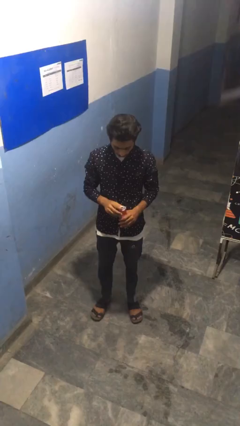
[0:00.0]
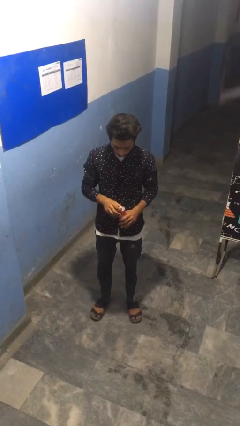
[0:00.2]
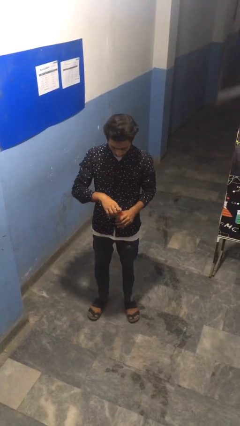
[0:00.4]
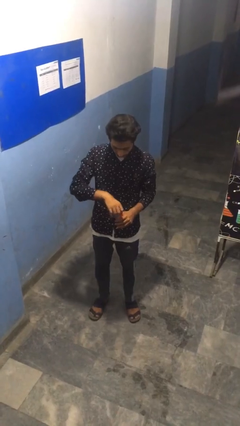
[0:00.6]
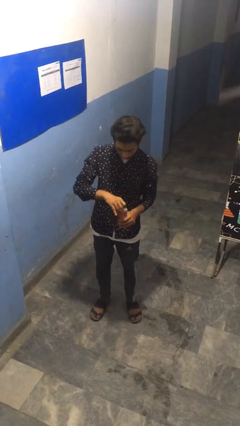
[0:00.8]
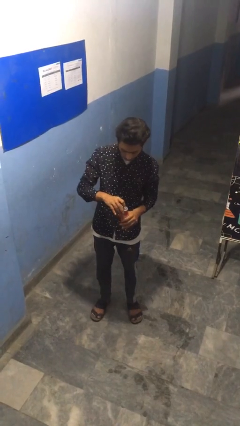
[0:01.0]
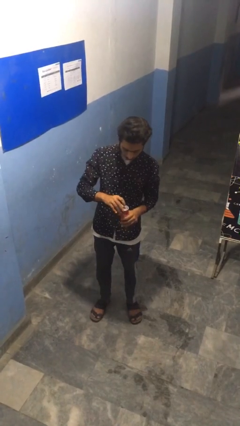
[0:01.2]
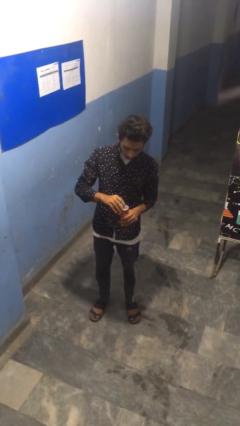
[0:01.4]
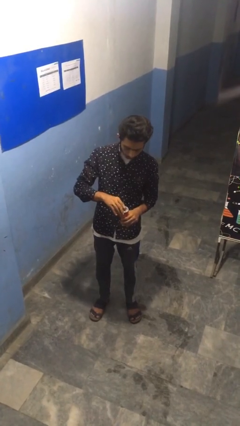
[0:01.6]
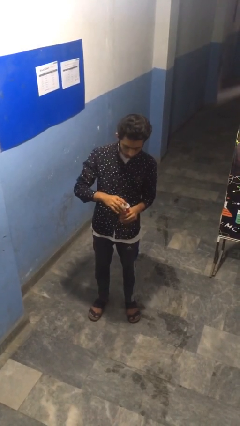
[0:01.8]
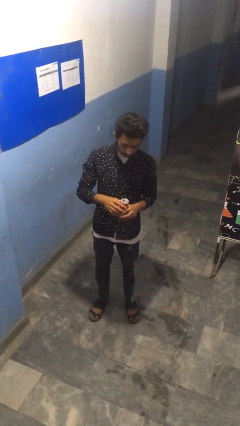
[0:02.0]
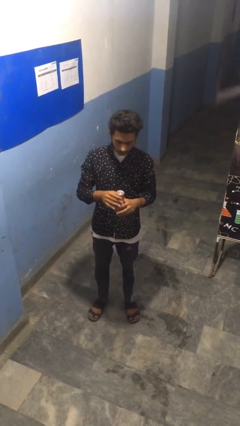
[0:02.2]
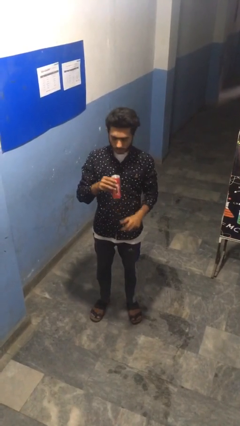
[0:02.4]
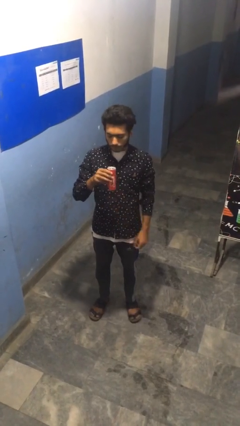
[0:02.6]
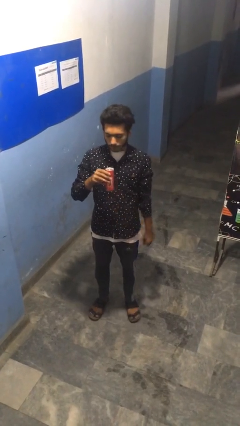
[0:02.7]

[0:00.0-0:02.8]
person opens beverage can

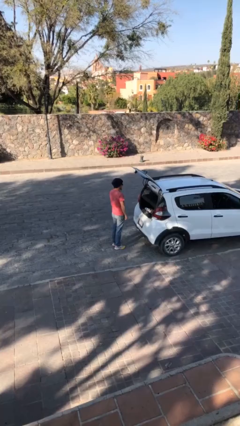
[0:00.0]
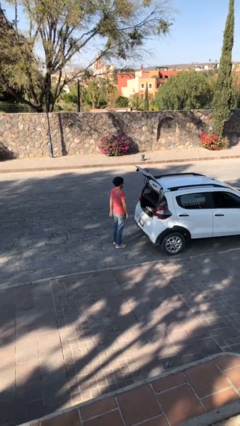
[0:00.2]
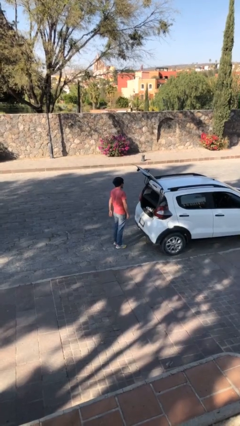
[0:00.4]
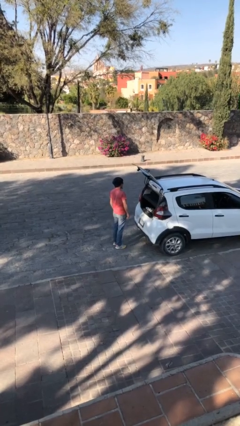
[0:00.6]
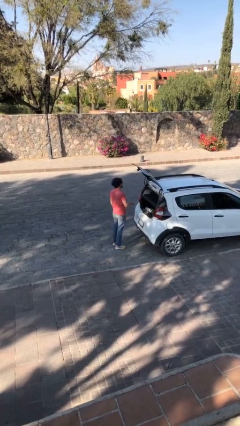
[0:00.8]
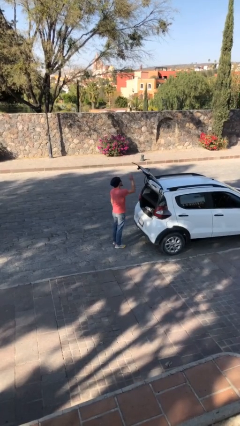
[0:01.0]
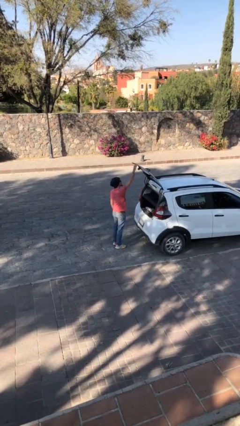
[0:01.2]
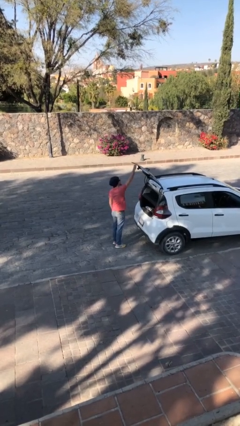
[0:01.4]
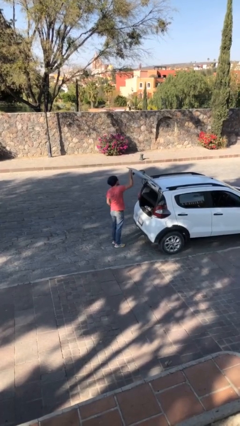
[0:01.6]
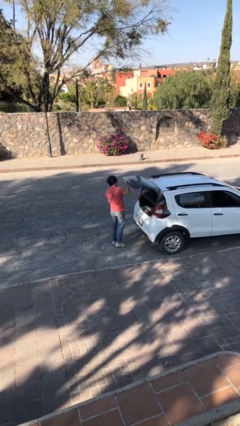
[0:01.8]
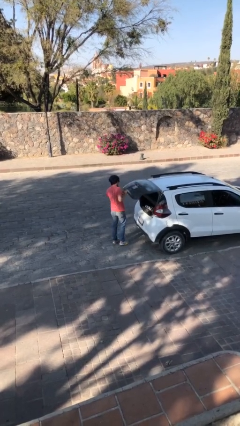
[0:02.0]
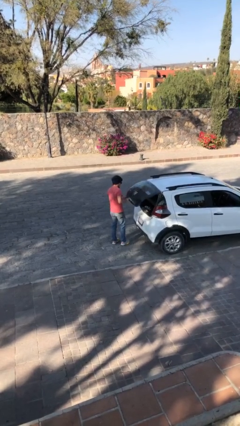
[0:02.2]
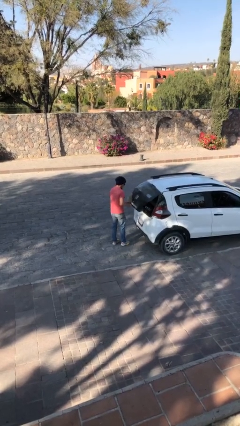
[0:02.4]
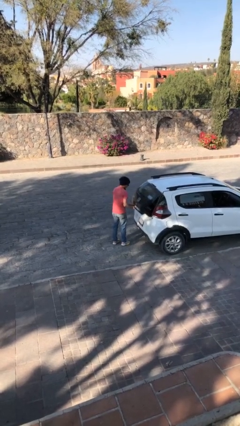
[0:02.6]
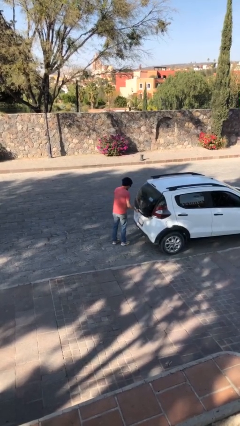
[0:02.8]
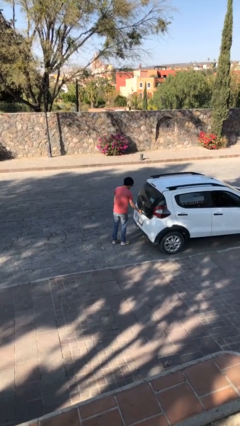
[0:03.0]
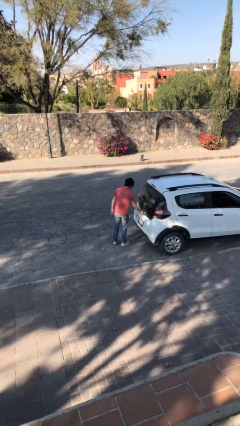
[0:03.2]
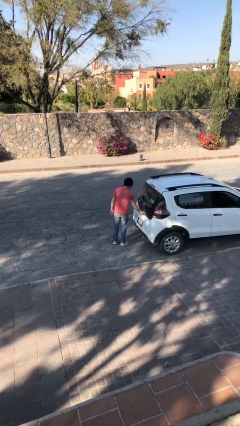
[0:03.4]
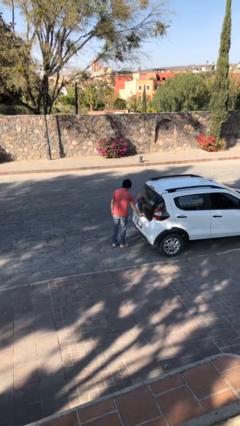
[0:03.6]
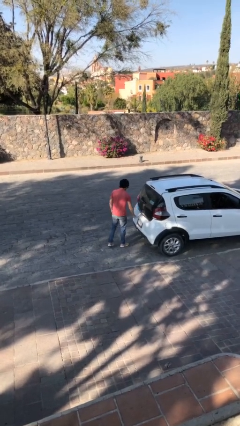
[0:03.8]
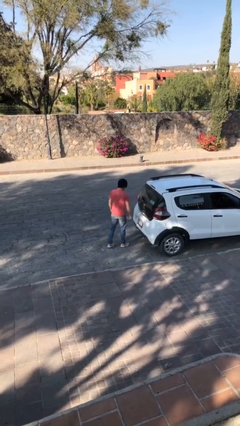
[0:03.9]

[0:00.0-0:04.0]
person closes car trunk

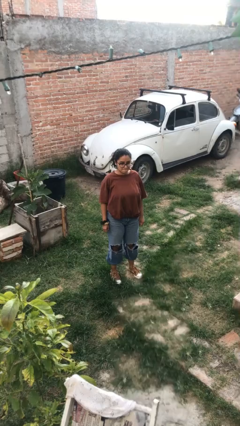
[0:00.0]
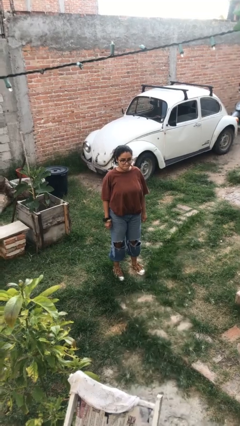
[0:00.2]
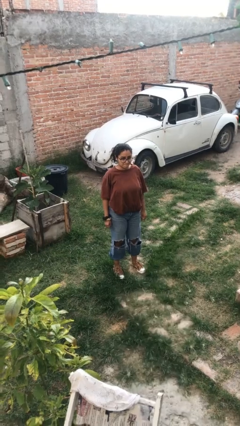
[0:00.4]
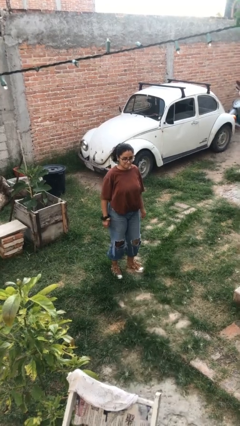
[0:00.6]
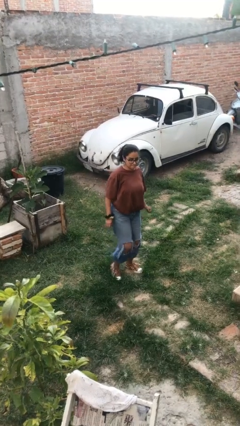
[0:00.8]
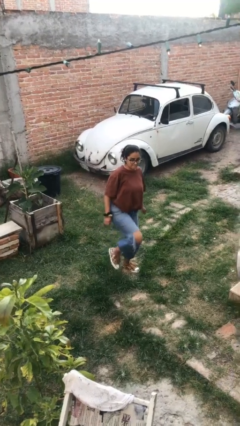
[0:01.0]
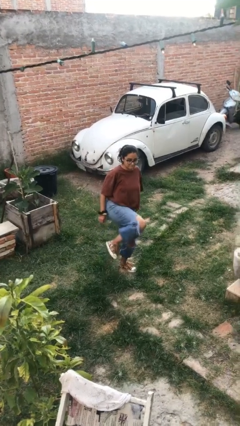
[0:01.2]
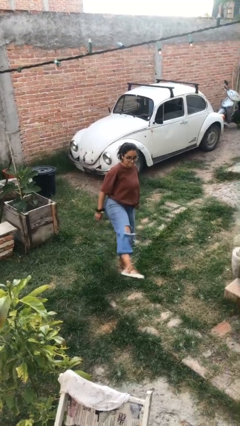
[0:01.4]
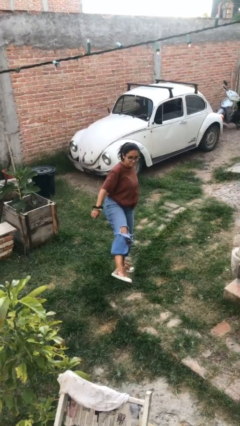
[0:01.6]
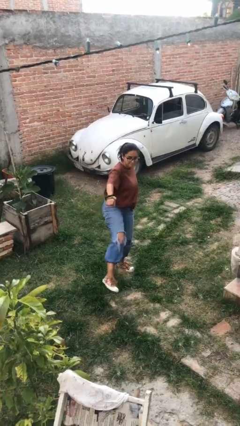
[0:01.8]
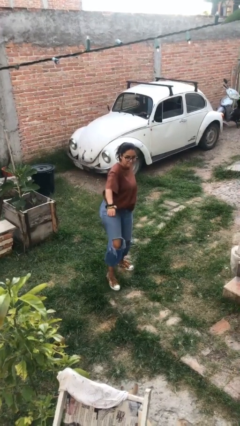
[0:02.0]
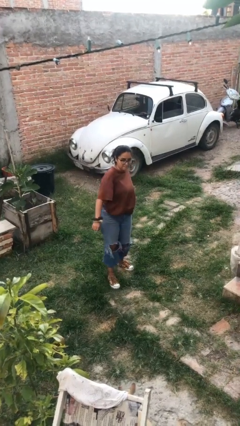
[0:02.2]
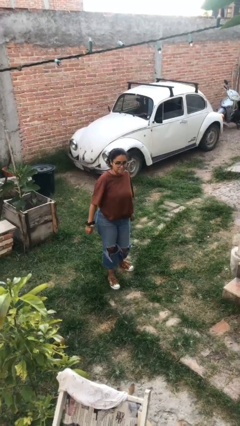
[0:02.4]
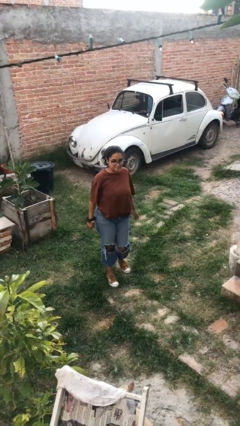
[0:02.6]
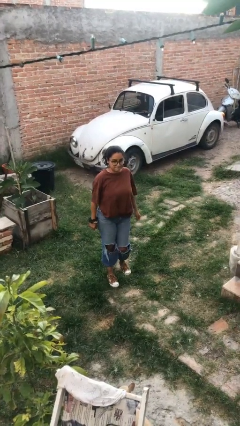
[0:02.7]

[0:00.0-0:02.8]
person karate kicks

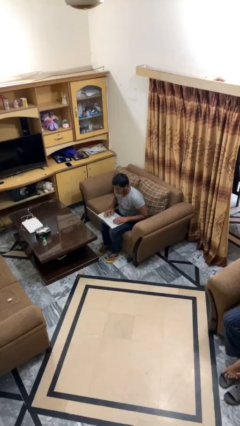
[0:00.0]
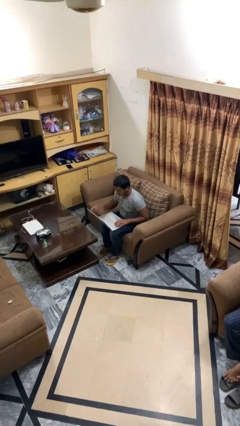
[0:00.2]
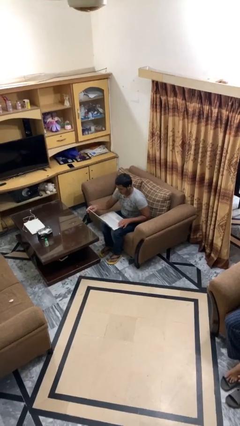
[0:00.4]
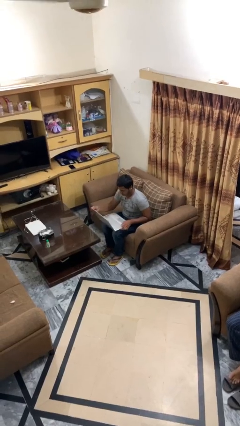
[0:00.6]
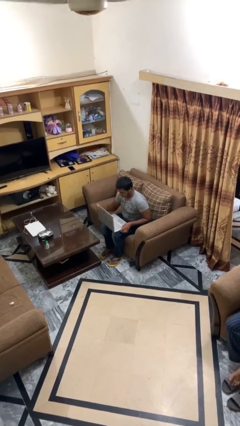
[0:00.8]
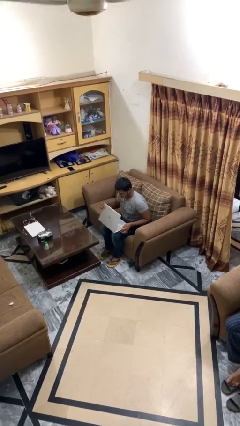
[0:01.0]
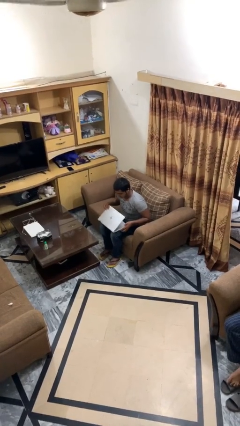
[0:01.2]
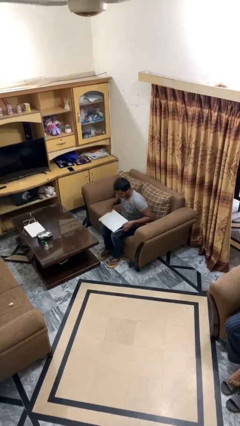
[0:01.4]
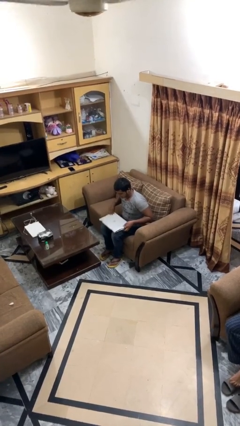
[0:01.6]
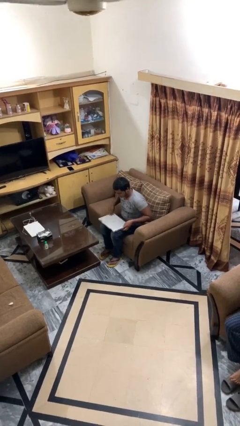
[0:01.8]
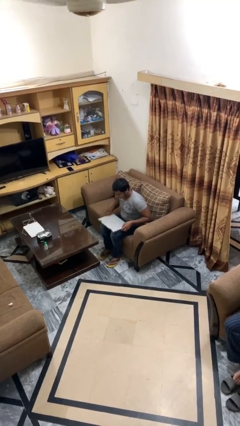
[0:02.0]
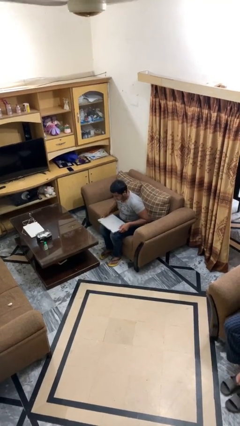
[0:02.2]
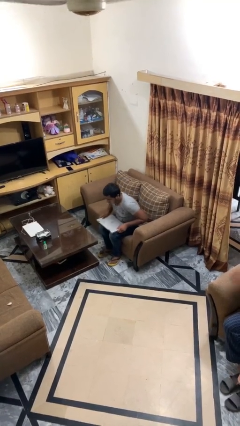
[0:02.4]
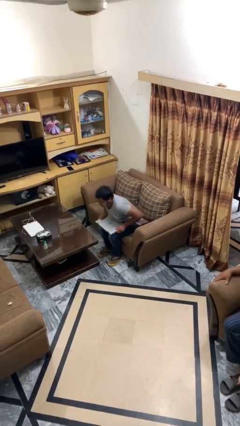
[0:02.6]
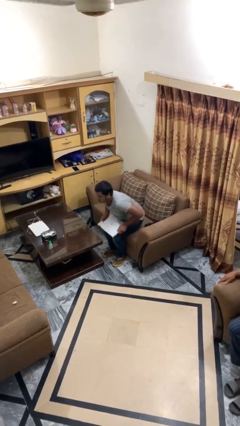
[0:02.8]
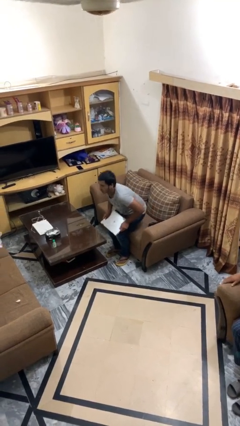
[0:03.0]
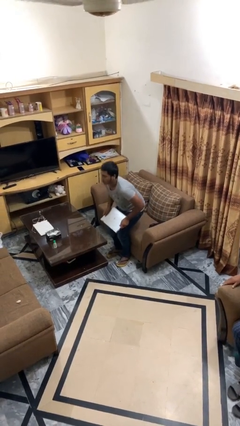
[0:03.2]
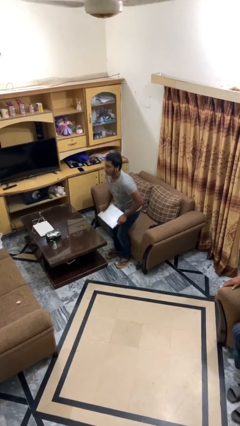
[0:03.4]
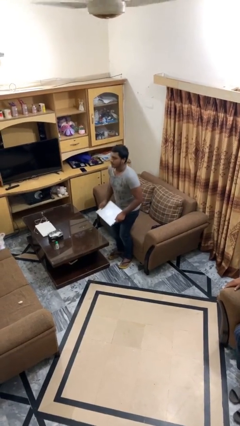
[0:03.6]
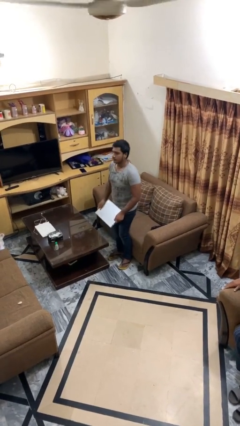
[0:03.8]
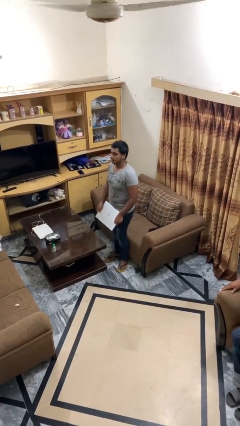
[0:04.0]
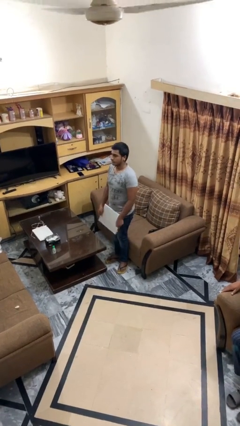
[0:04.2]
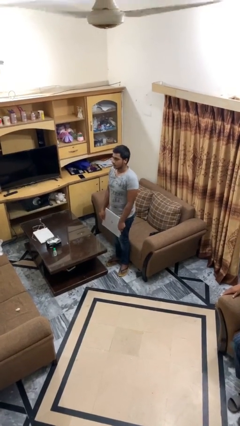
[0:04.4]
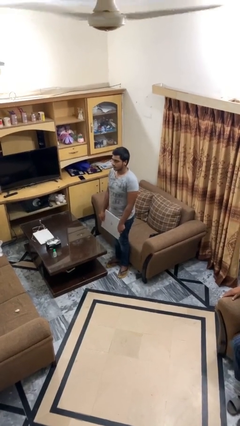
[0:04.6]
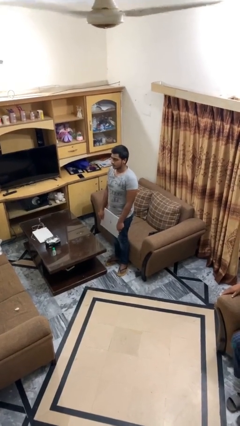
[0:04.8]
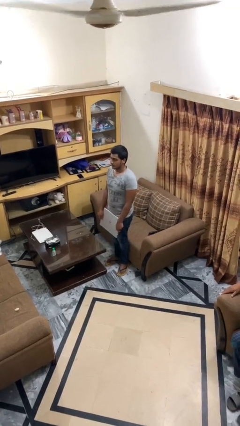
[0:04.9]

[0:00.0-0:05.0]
person stands up

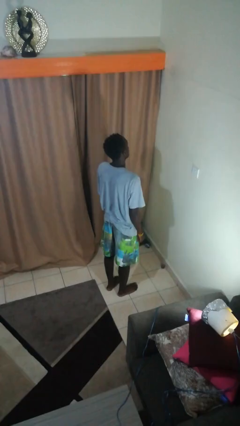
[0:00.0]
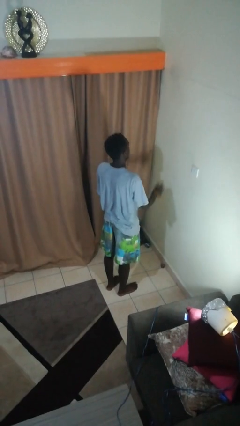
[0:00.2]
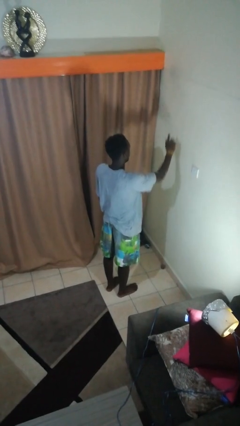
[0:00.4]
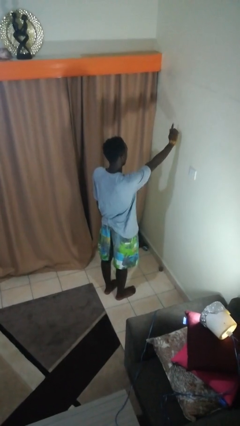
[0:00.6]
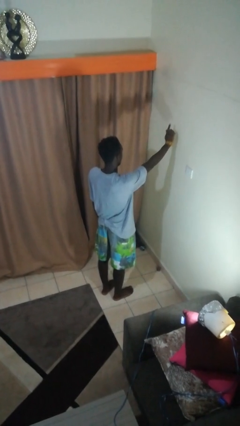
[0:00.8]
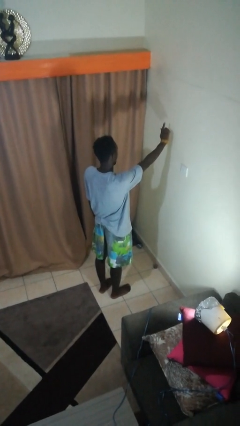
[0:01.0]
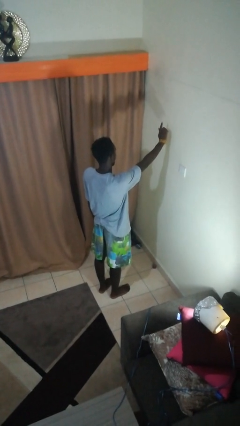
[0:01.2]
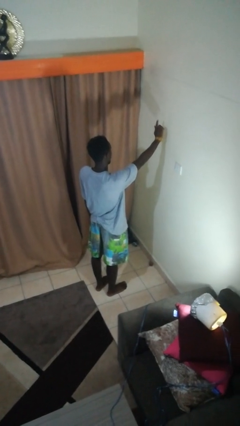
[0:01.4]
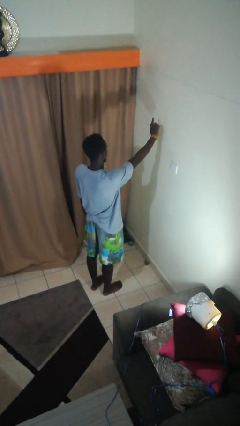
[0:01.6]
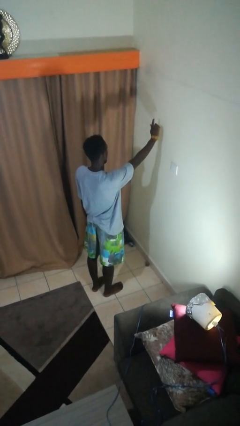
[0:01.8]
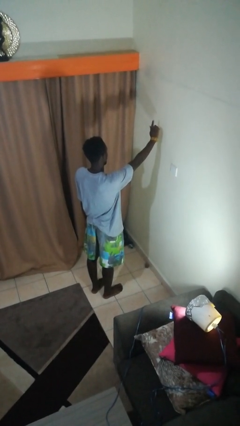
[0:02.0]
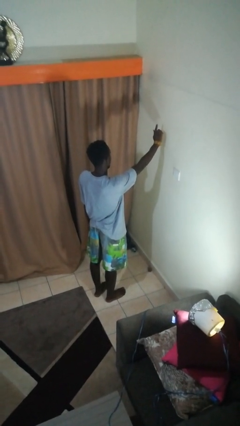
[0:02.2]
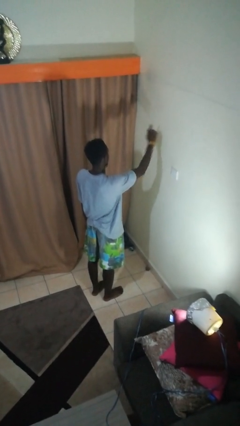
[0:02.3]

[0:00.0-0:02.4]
person gestures number one

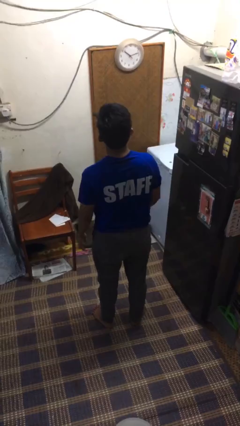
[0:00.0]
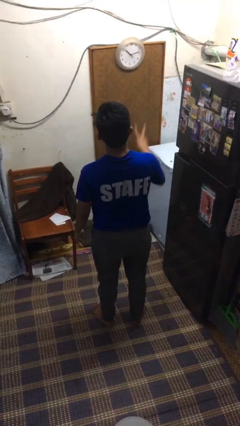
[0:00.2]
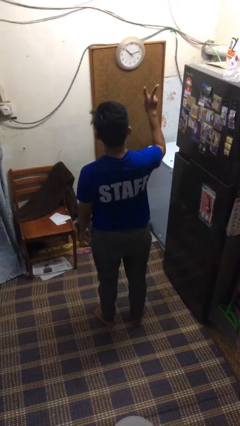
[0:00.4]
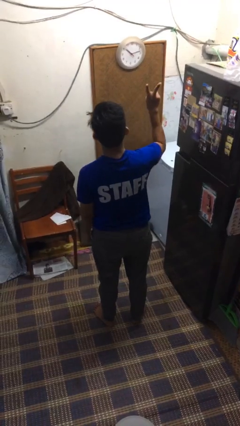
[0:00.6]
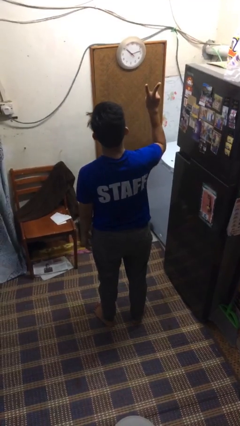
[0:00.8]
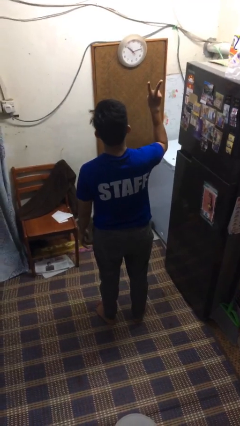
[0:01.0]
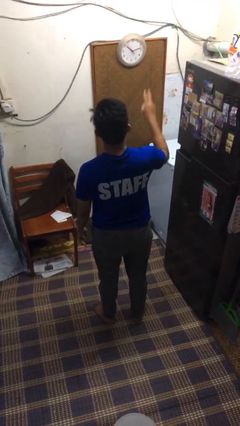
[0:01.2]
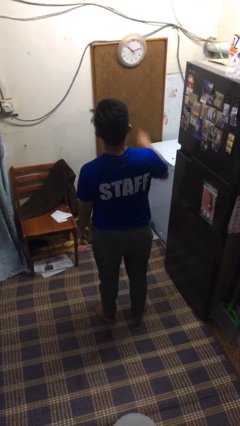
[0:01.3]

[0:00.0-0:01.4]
person gestures peace
